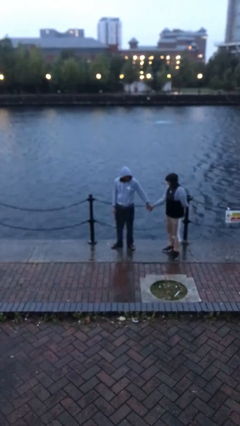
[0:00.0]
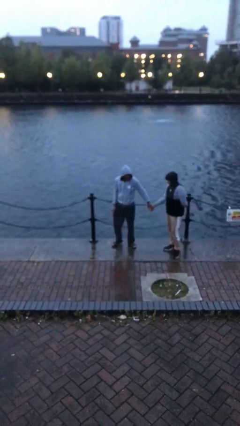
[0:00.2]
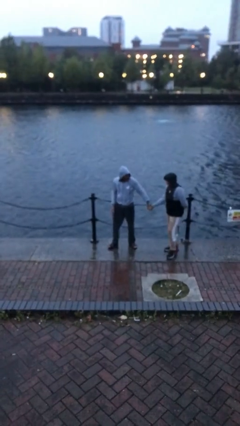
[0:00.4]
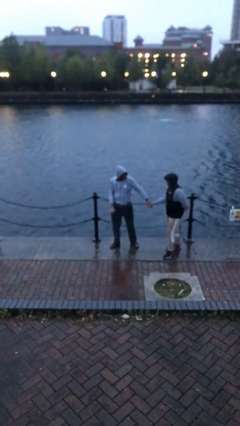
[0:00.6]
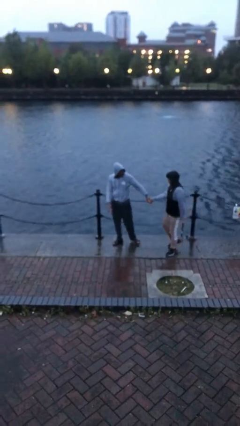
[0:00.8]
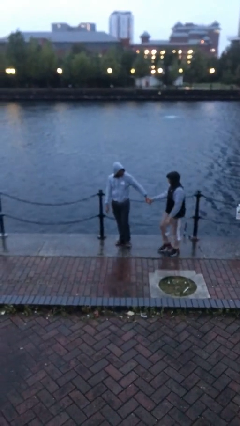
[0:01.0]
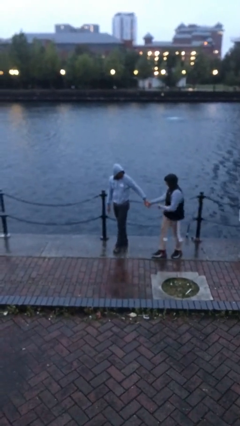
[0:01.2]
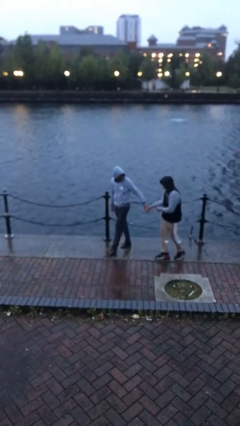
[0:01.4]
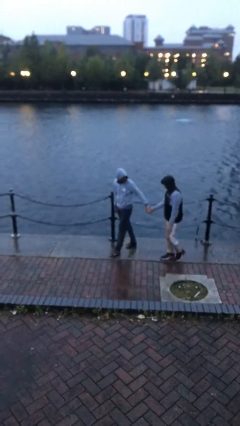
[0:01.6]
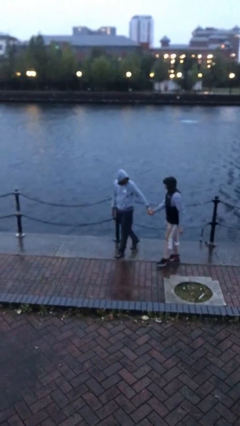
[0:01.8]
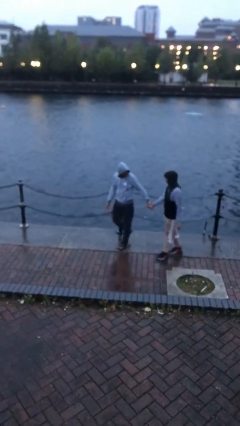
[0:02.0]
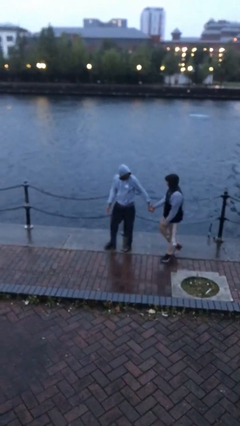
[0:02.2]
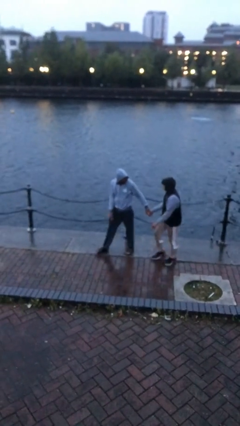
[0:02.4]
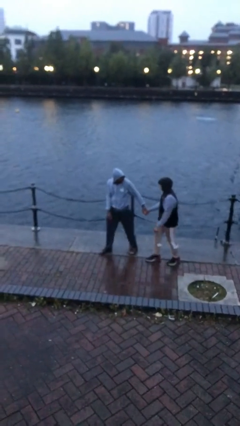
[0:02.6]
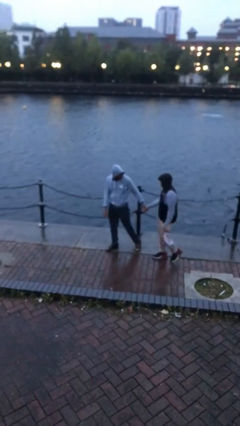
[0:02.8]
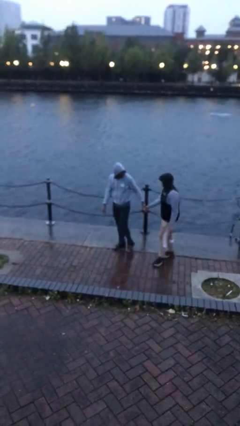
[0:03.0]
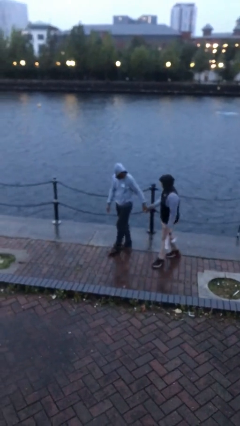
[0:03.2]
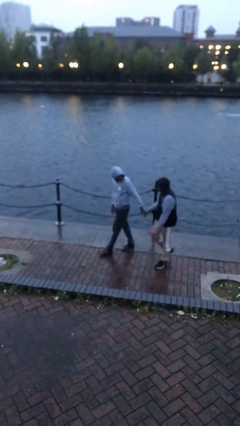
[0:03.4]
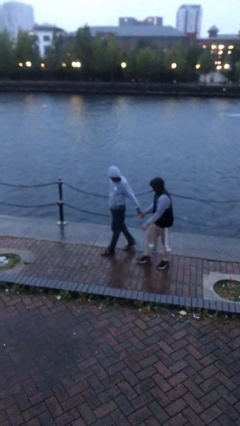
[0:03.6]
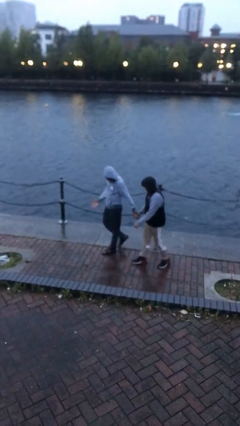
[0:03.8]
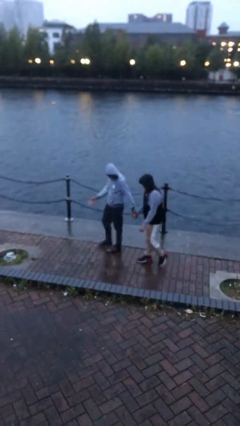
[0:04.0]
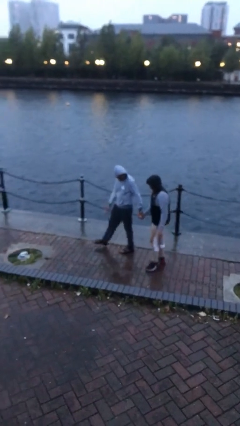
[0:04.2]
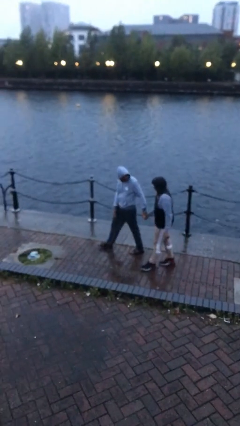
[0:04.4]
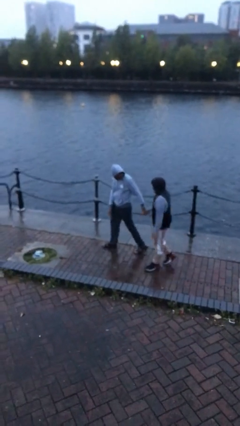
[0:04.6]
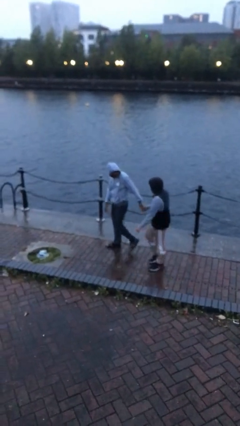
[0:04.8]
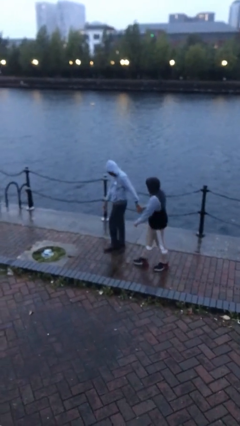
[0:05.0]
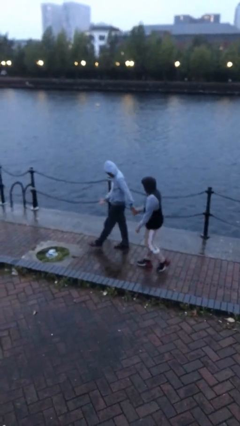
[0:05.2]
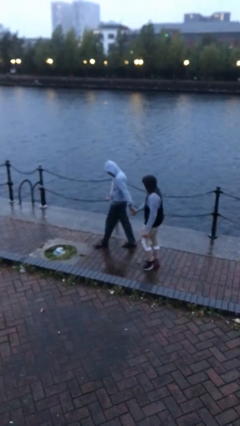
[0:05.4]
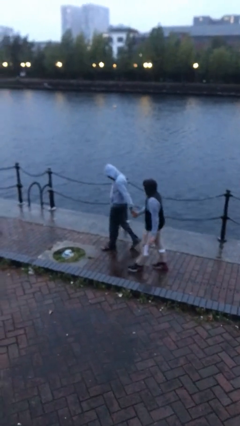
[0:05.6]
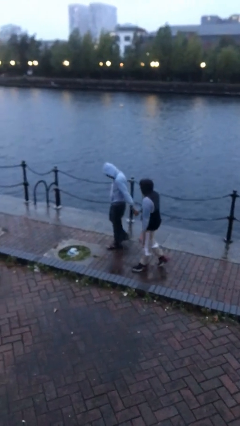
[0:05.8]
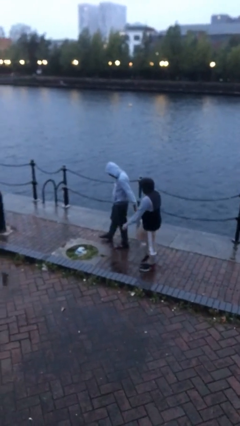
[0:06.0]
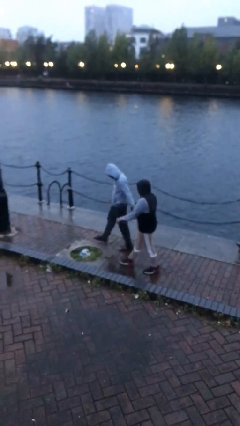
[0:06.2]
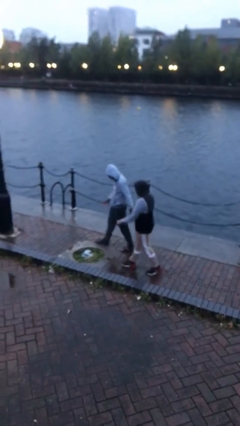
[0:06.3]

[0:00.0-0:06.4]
person holds hand

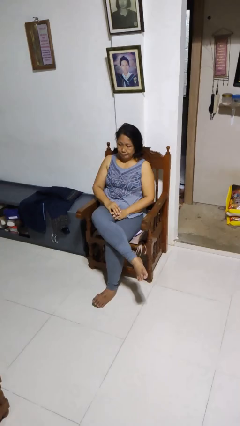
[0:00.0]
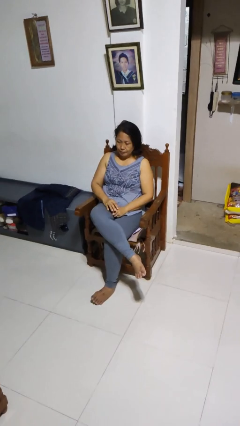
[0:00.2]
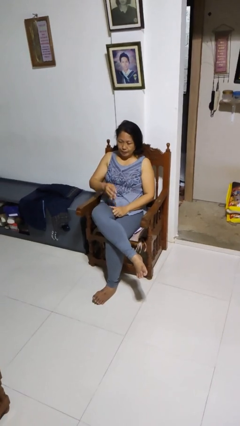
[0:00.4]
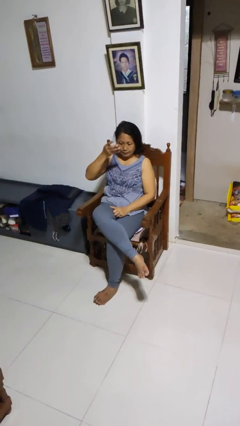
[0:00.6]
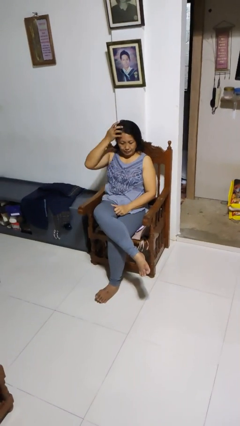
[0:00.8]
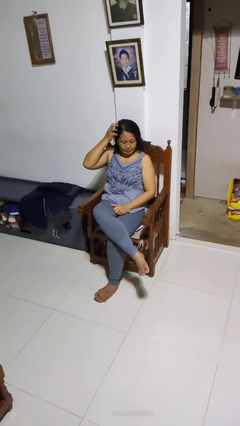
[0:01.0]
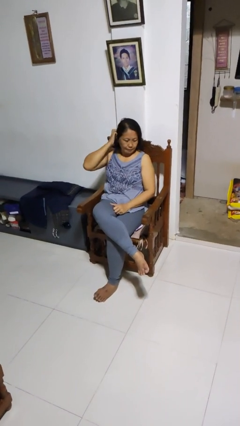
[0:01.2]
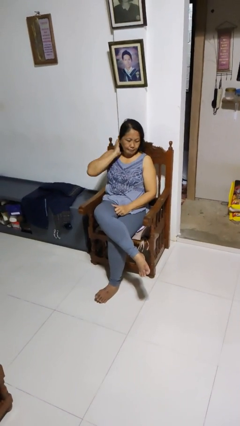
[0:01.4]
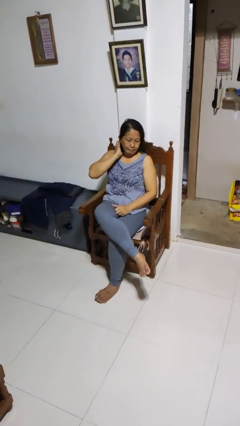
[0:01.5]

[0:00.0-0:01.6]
person strokes hair

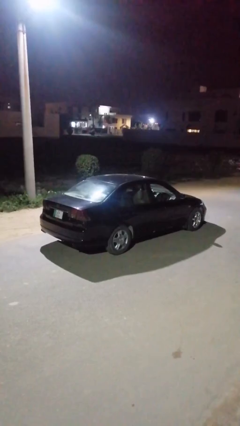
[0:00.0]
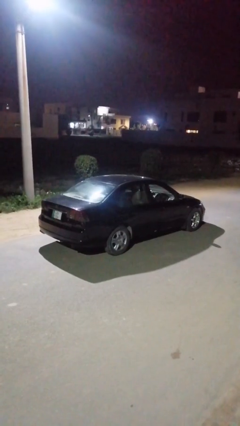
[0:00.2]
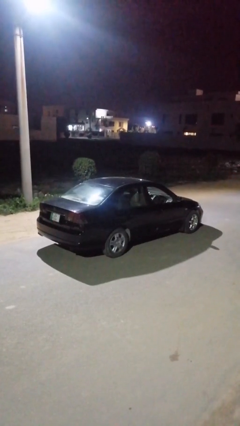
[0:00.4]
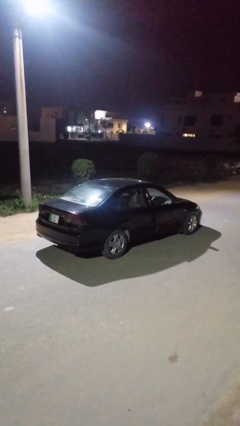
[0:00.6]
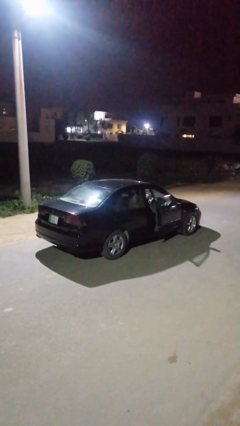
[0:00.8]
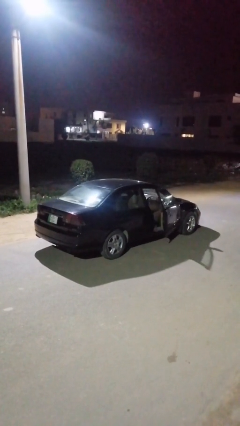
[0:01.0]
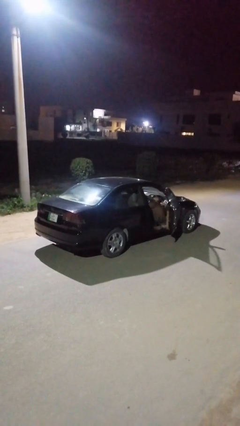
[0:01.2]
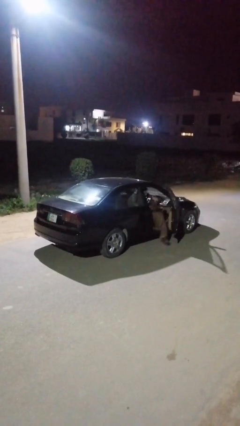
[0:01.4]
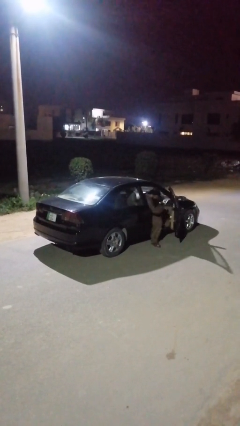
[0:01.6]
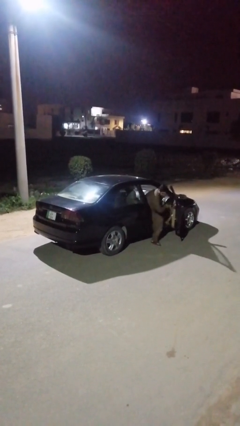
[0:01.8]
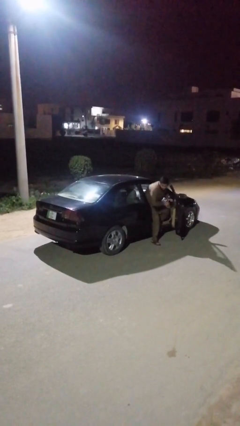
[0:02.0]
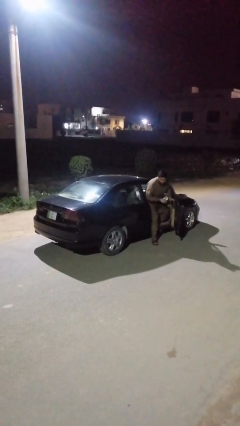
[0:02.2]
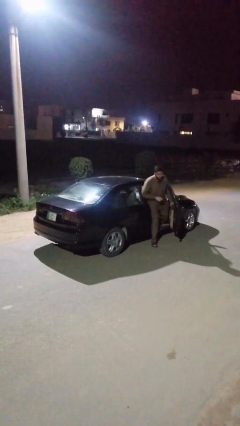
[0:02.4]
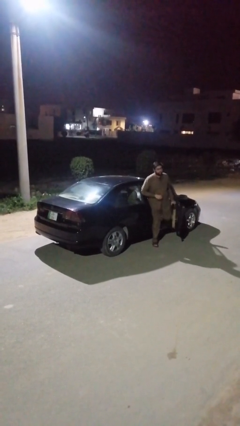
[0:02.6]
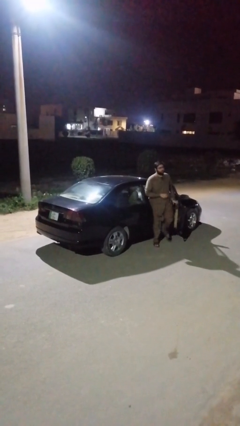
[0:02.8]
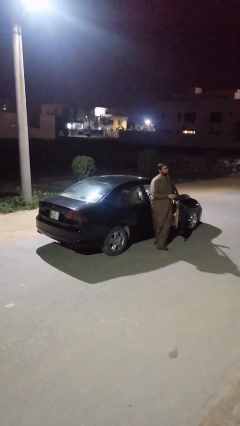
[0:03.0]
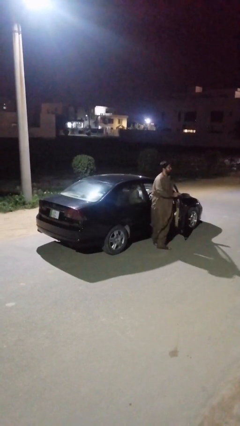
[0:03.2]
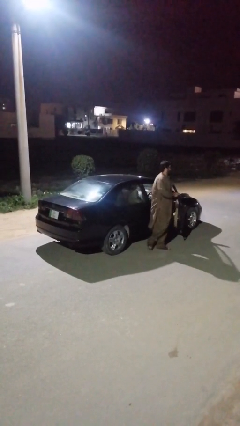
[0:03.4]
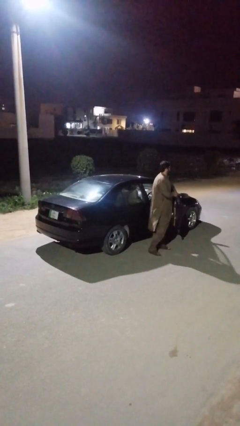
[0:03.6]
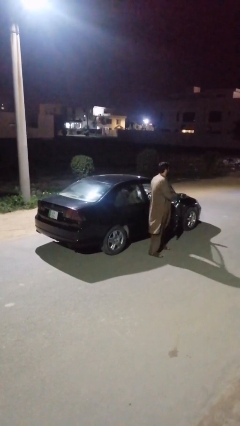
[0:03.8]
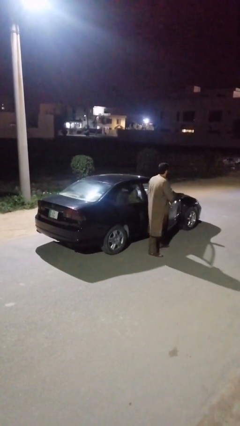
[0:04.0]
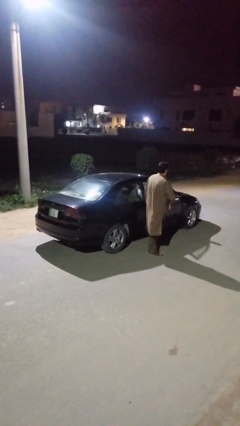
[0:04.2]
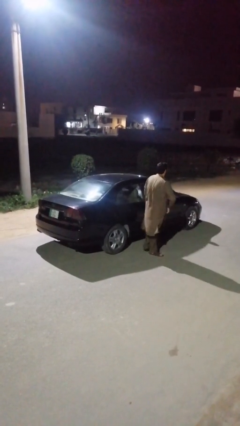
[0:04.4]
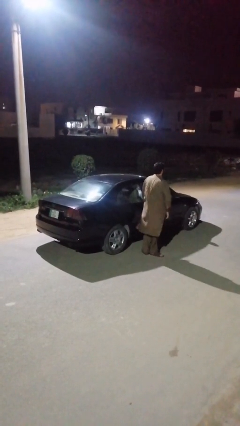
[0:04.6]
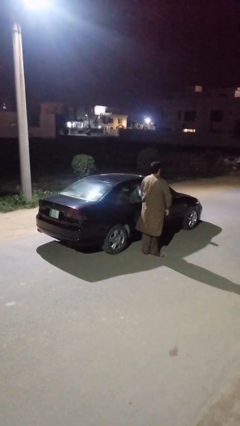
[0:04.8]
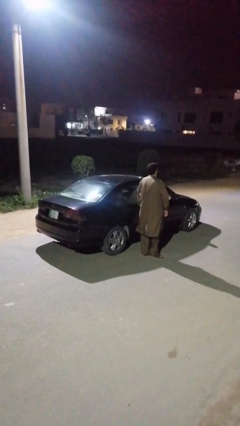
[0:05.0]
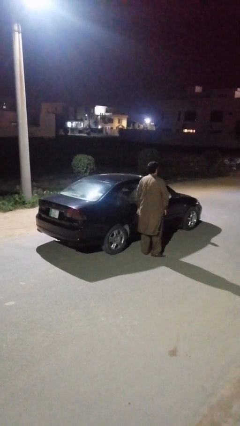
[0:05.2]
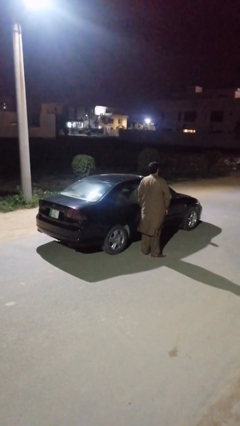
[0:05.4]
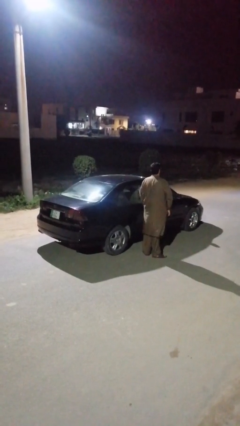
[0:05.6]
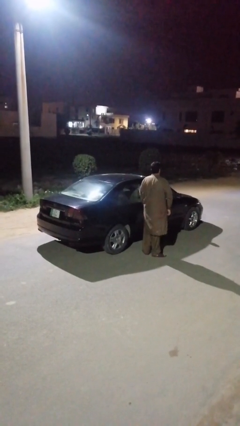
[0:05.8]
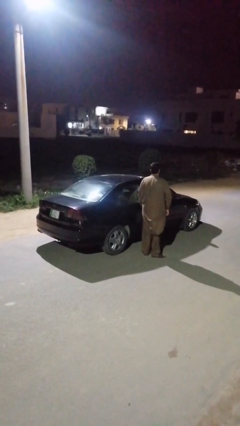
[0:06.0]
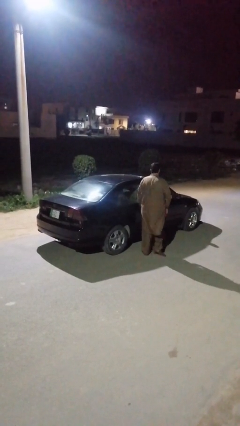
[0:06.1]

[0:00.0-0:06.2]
car drops off person

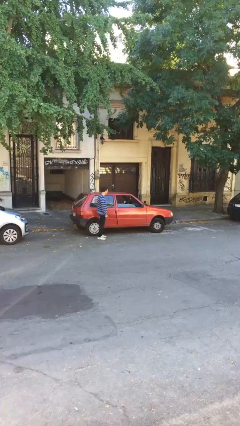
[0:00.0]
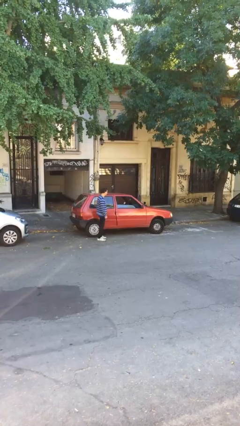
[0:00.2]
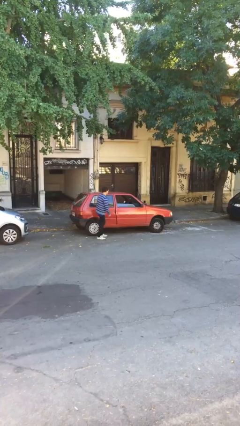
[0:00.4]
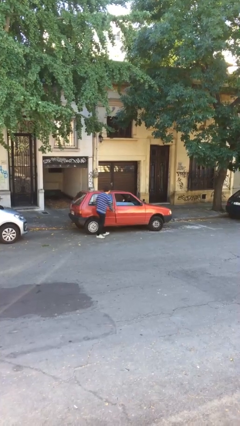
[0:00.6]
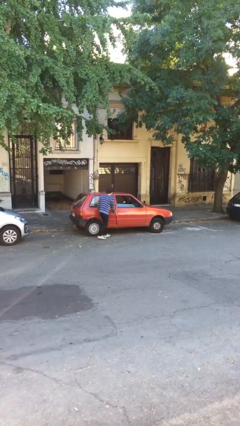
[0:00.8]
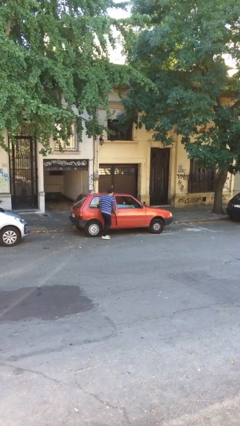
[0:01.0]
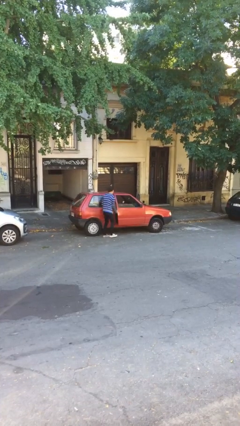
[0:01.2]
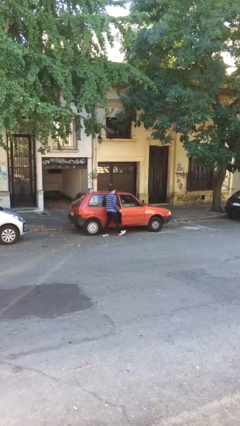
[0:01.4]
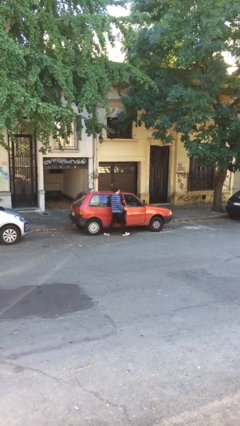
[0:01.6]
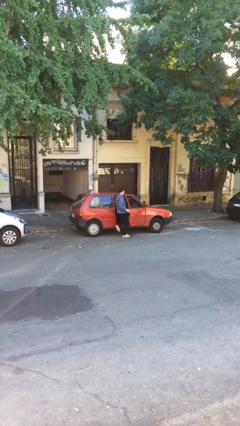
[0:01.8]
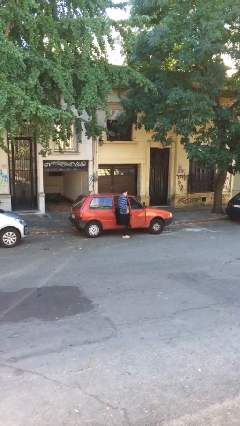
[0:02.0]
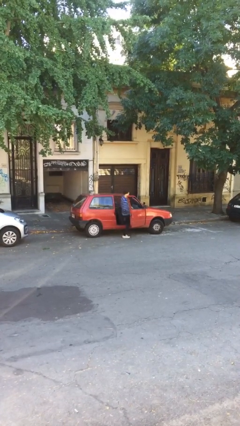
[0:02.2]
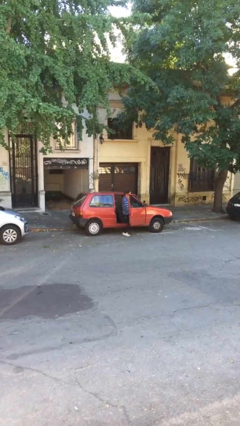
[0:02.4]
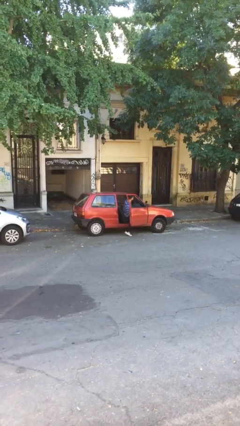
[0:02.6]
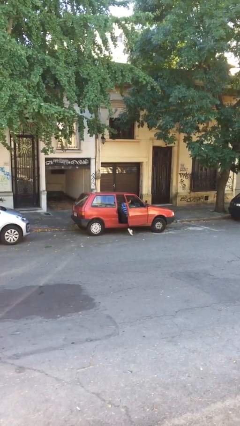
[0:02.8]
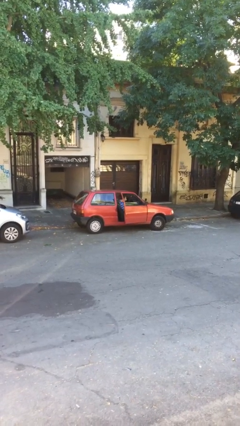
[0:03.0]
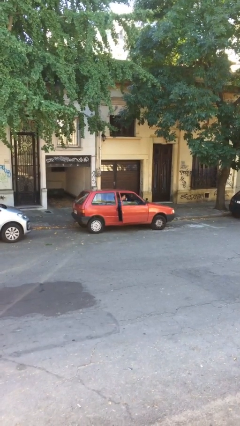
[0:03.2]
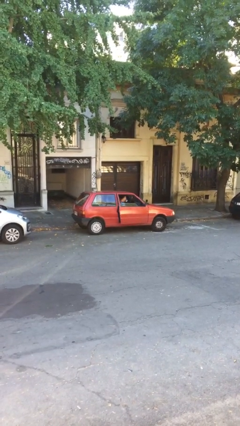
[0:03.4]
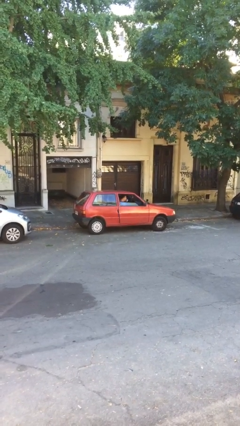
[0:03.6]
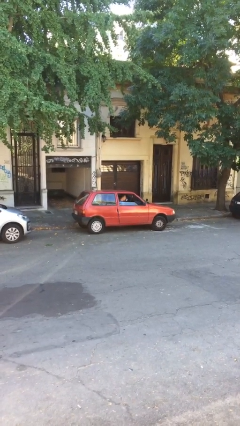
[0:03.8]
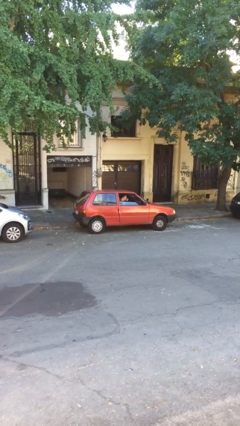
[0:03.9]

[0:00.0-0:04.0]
car picks up person
